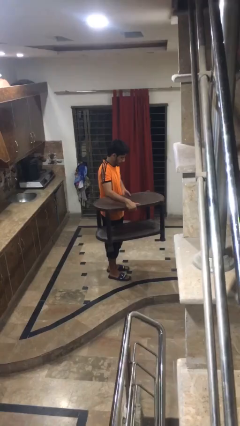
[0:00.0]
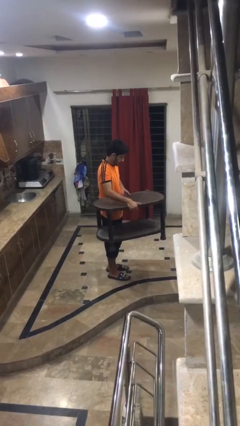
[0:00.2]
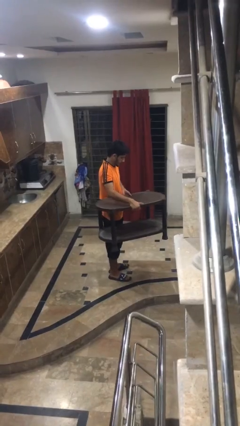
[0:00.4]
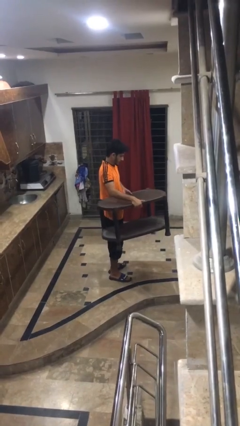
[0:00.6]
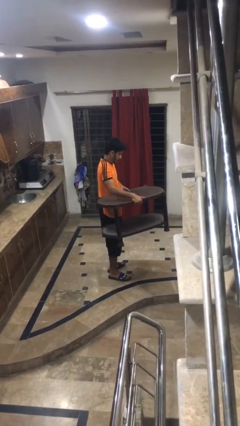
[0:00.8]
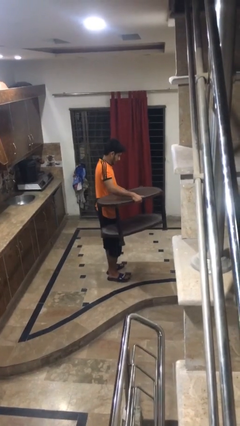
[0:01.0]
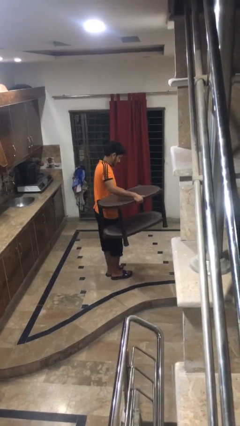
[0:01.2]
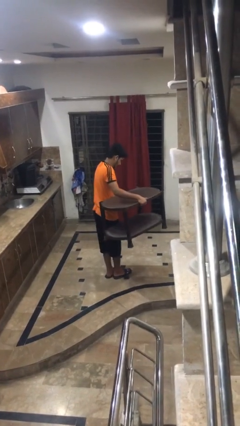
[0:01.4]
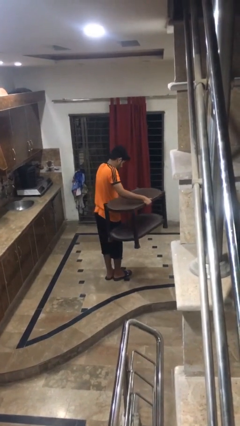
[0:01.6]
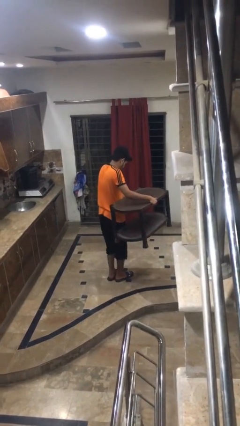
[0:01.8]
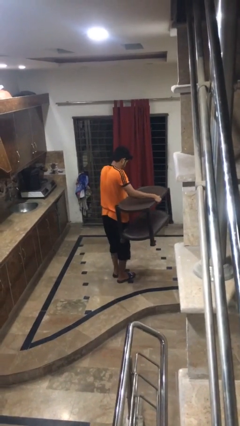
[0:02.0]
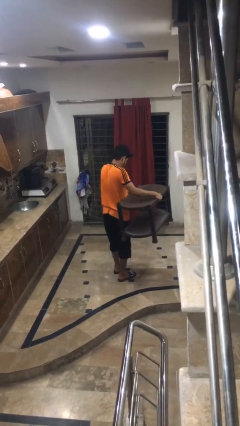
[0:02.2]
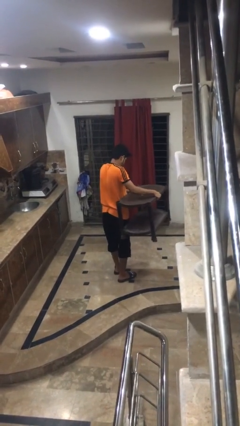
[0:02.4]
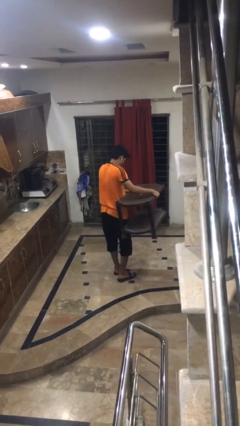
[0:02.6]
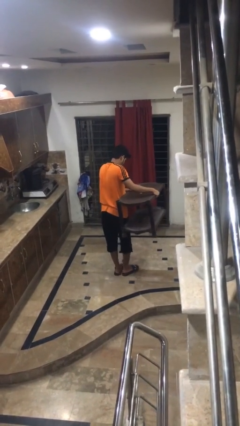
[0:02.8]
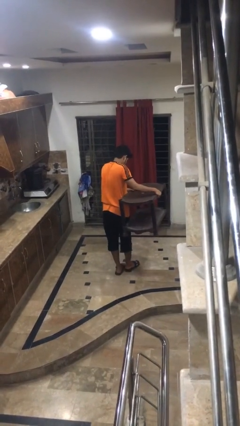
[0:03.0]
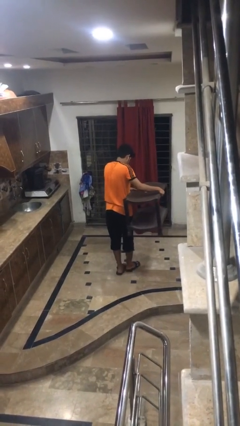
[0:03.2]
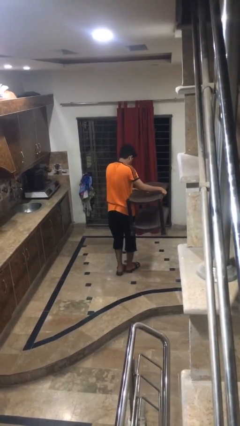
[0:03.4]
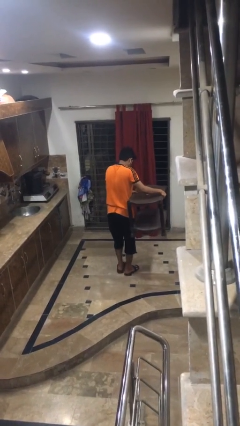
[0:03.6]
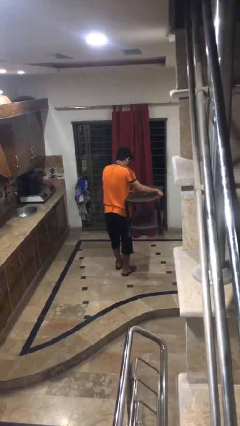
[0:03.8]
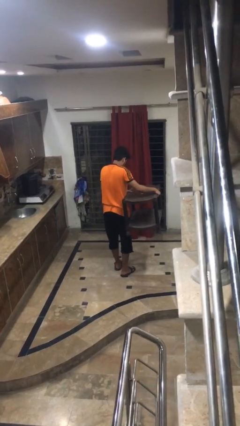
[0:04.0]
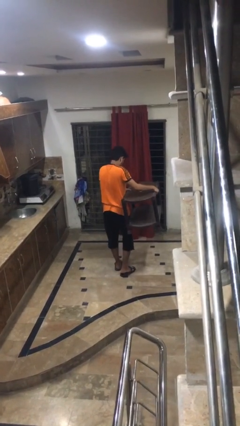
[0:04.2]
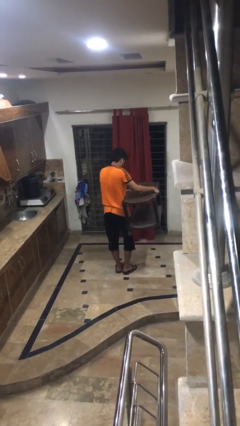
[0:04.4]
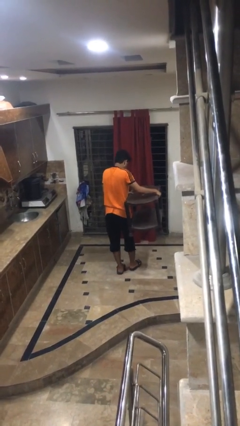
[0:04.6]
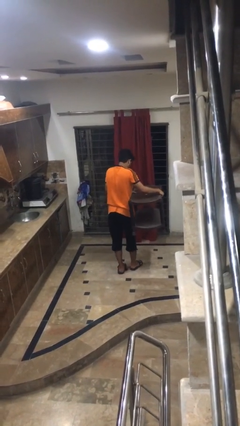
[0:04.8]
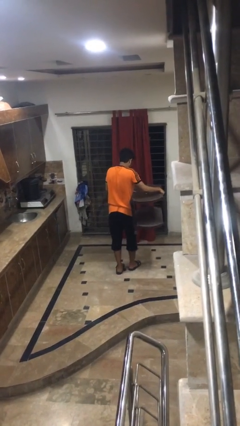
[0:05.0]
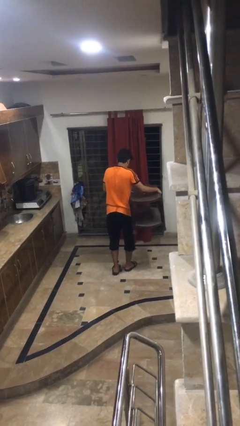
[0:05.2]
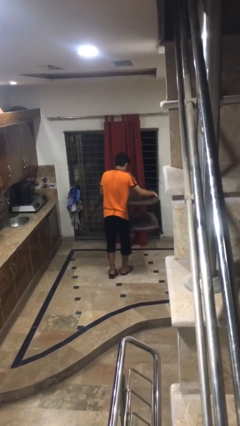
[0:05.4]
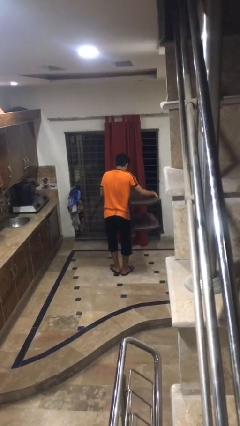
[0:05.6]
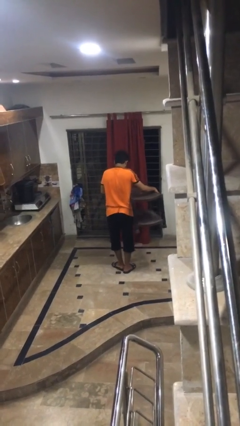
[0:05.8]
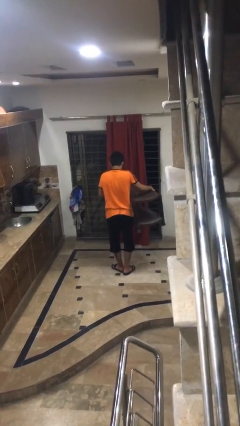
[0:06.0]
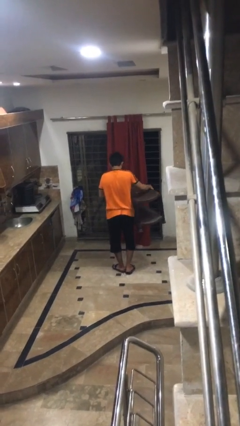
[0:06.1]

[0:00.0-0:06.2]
person carries furniture

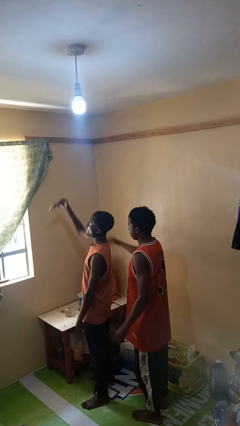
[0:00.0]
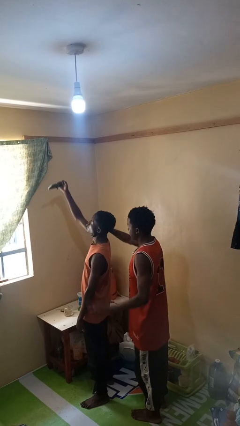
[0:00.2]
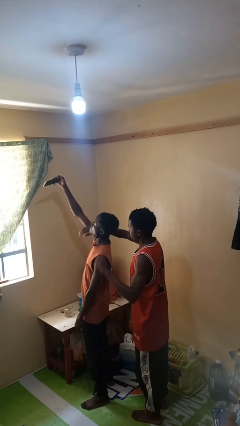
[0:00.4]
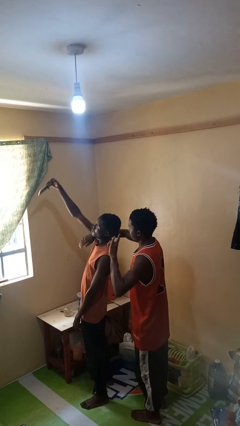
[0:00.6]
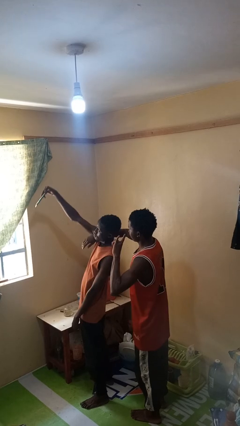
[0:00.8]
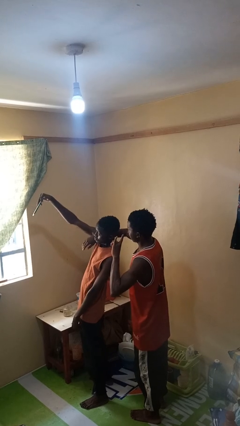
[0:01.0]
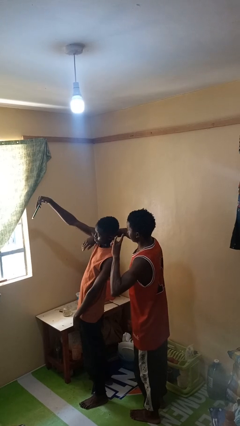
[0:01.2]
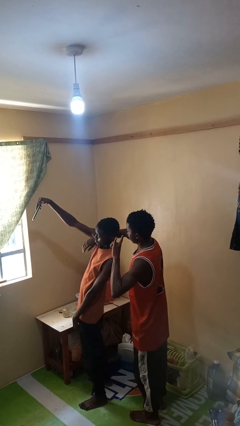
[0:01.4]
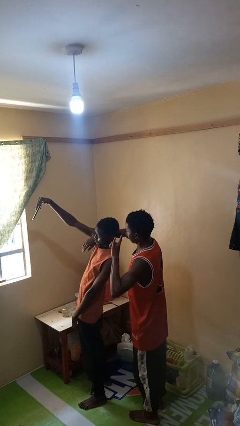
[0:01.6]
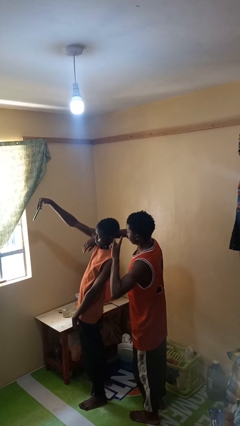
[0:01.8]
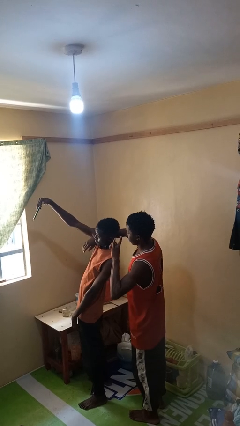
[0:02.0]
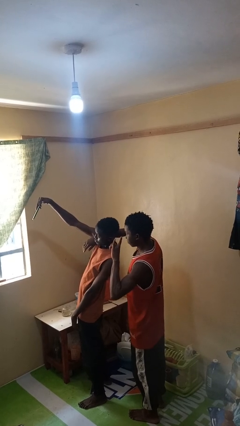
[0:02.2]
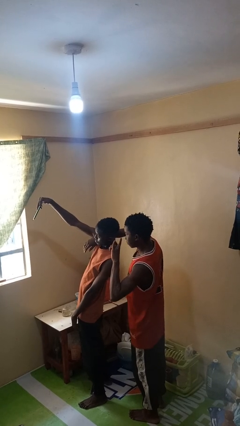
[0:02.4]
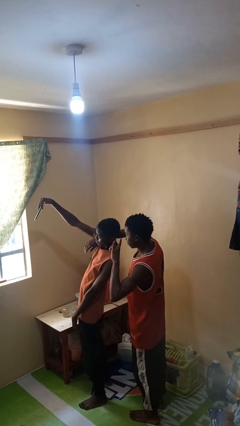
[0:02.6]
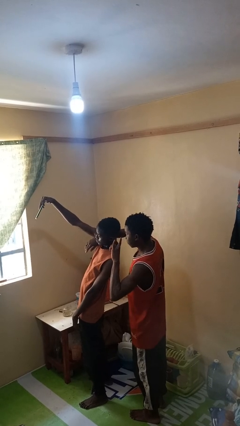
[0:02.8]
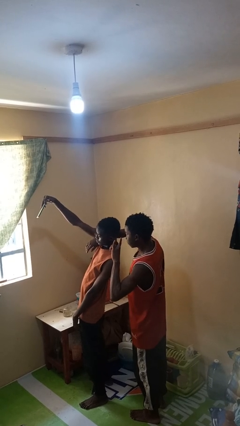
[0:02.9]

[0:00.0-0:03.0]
person takes selfie with person

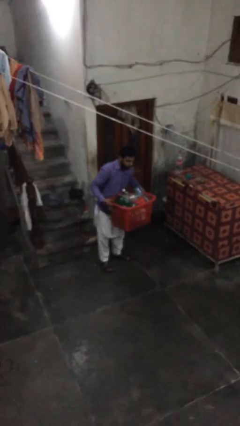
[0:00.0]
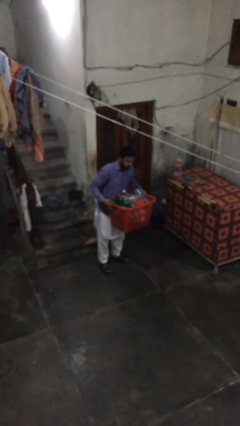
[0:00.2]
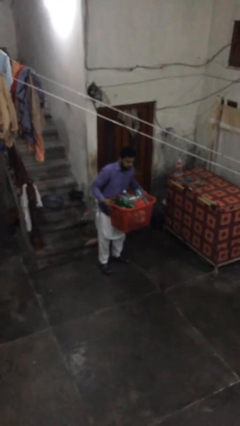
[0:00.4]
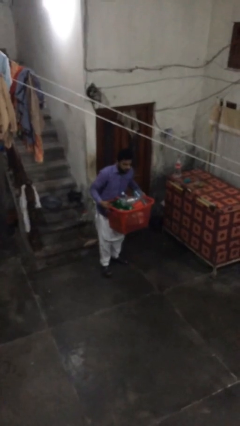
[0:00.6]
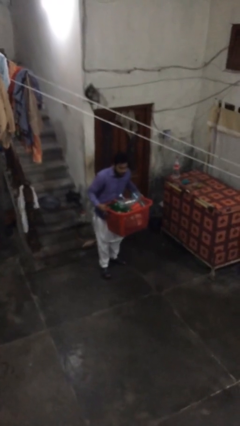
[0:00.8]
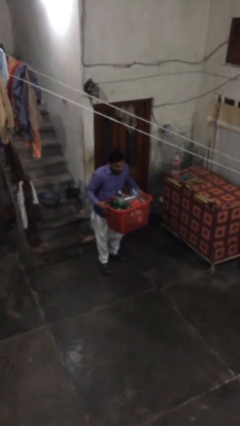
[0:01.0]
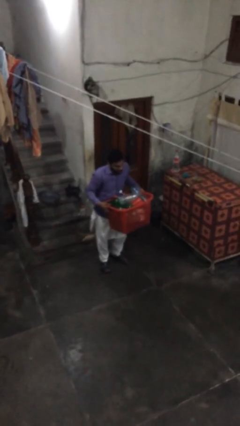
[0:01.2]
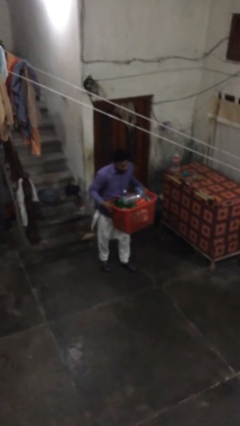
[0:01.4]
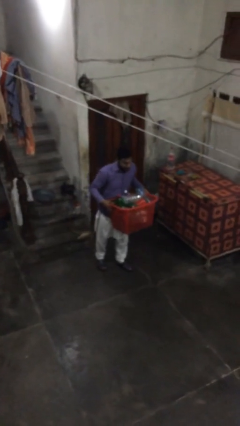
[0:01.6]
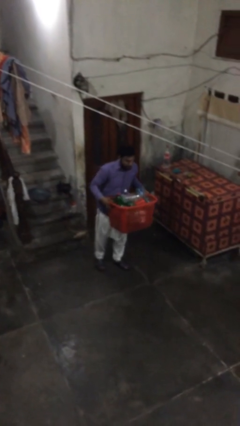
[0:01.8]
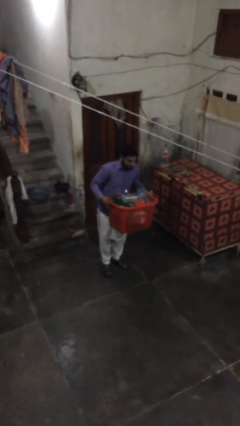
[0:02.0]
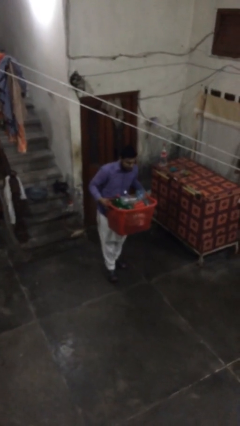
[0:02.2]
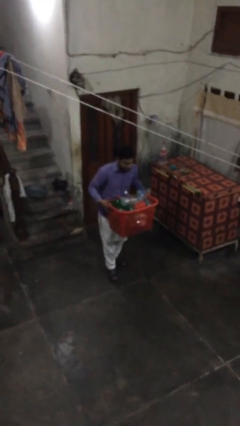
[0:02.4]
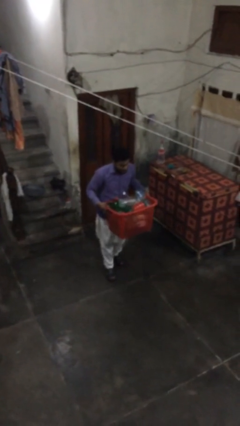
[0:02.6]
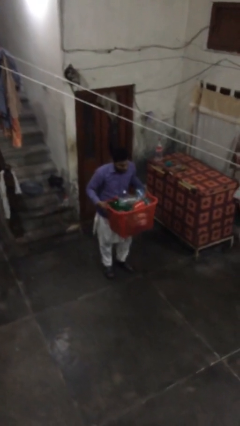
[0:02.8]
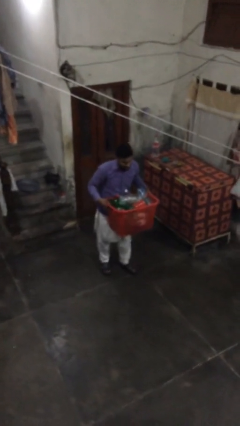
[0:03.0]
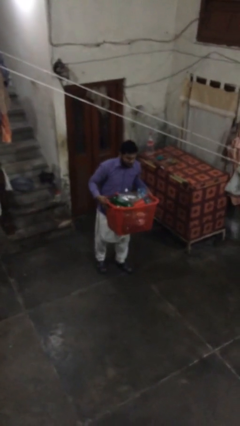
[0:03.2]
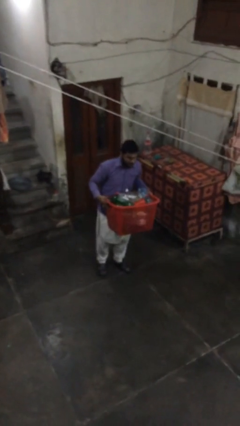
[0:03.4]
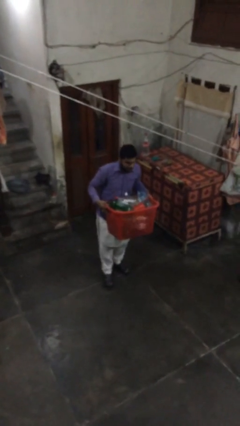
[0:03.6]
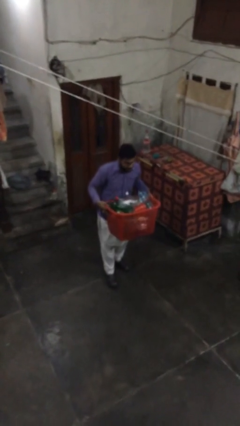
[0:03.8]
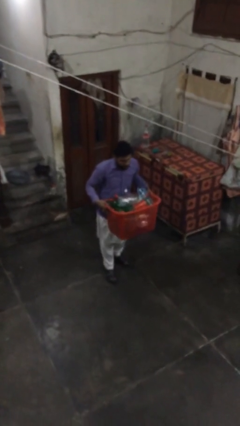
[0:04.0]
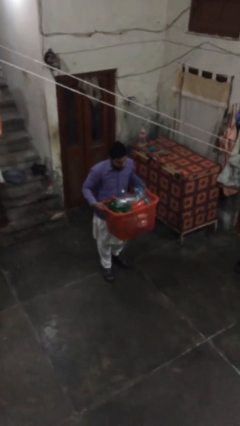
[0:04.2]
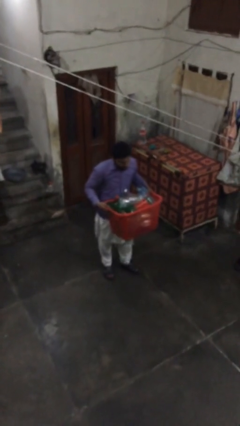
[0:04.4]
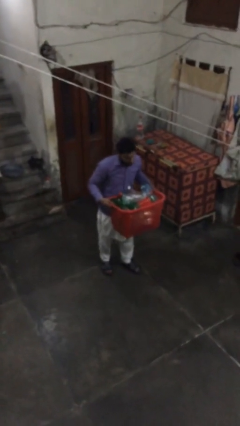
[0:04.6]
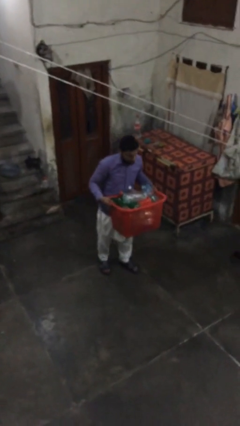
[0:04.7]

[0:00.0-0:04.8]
person carries heavy object

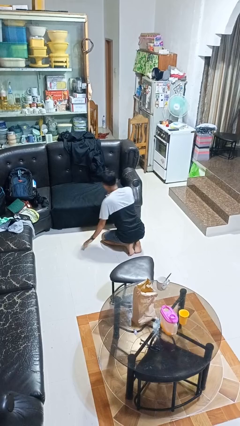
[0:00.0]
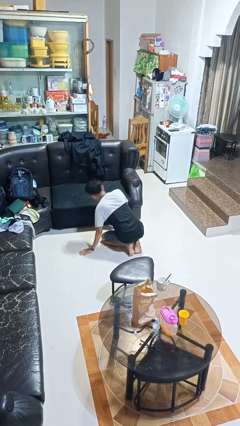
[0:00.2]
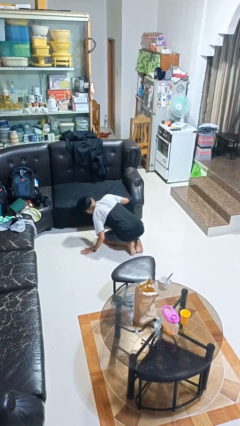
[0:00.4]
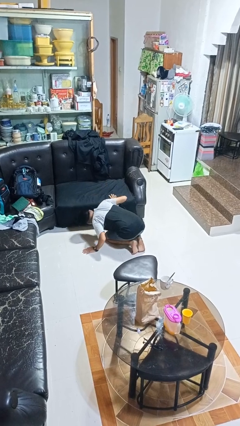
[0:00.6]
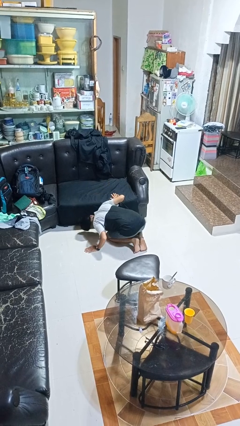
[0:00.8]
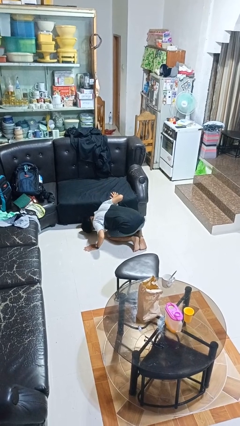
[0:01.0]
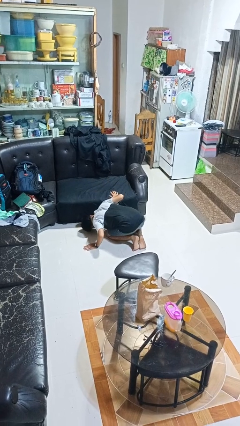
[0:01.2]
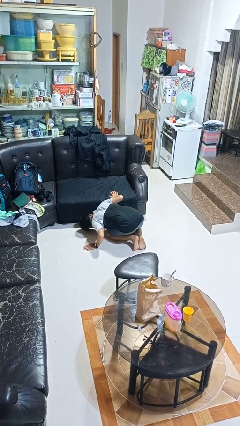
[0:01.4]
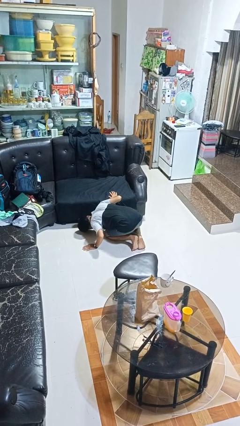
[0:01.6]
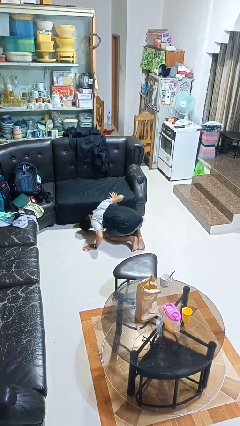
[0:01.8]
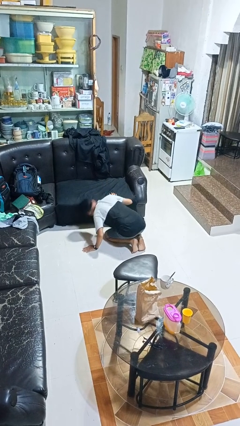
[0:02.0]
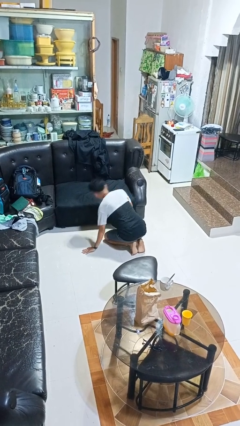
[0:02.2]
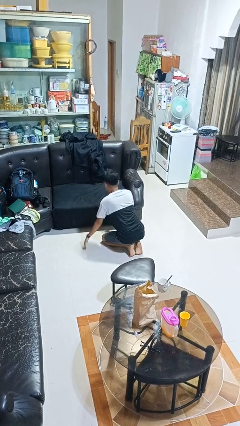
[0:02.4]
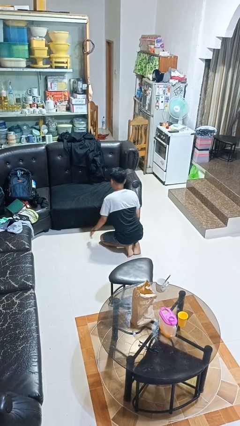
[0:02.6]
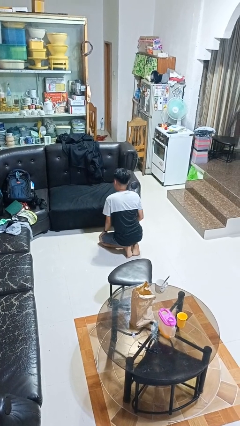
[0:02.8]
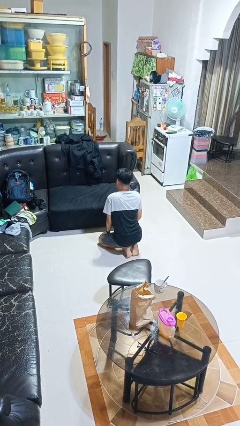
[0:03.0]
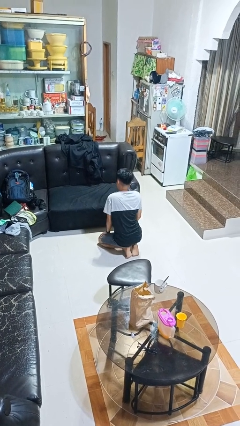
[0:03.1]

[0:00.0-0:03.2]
person searches under couch

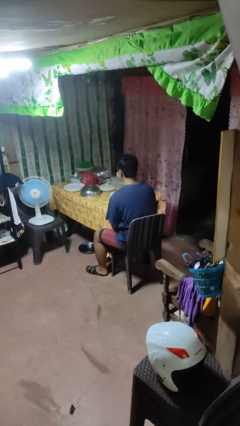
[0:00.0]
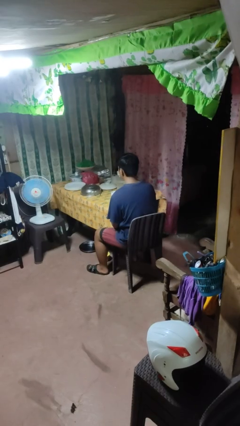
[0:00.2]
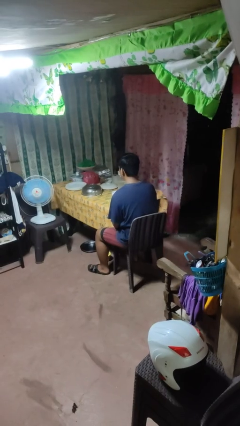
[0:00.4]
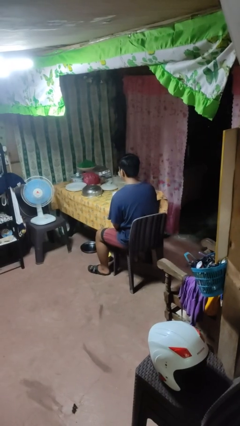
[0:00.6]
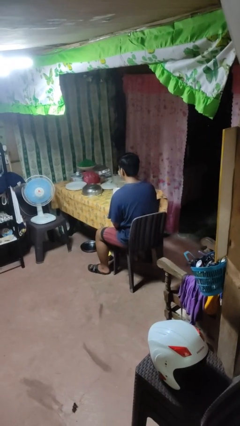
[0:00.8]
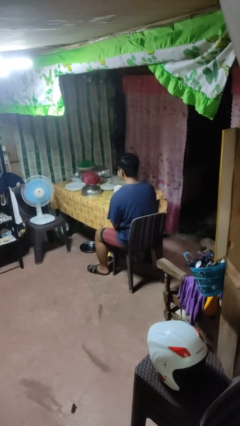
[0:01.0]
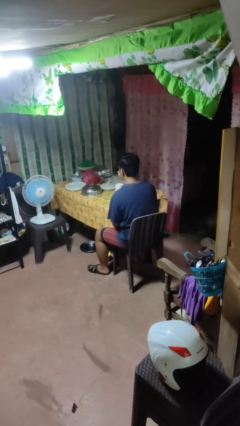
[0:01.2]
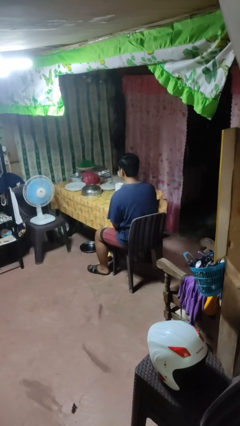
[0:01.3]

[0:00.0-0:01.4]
person picks up object from table
